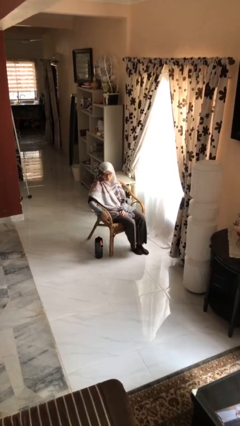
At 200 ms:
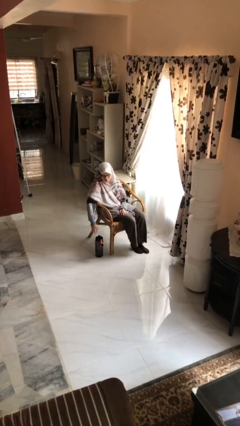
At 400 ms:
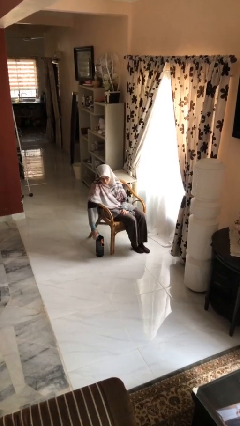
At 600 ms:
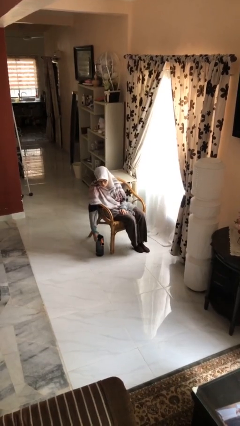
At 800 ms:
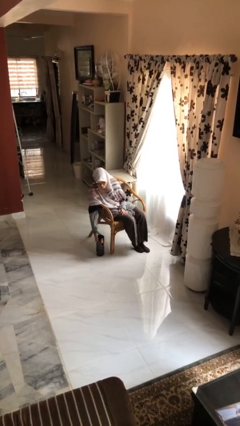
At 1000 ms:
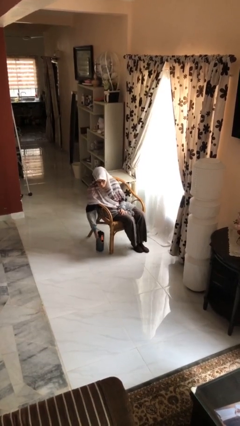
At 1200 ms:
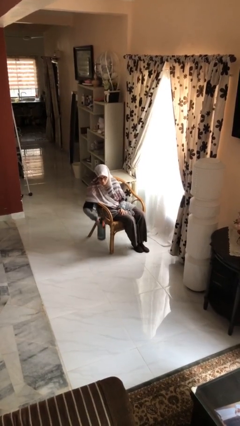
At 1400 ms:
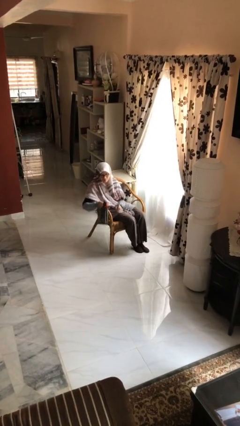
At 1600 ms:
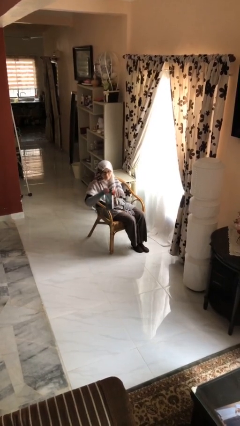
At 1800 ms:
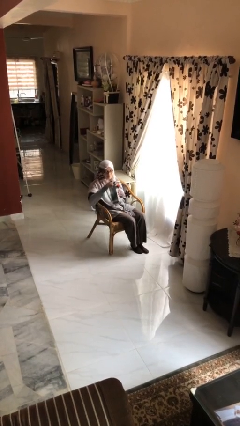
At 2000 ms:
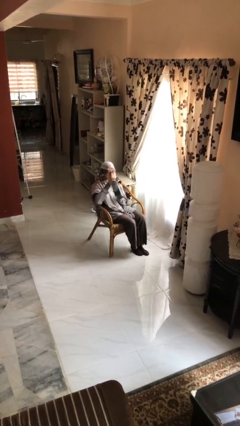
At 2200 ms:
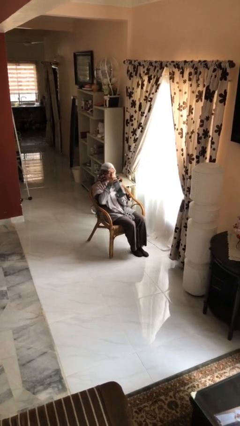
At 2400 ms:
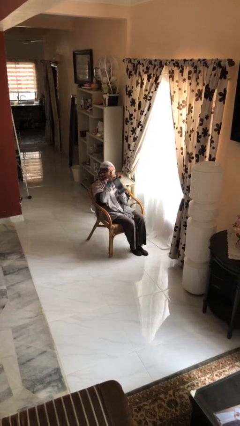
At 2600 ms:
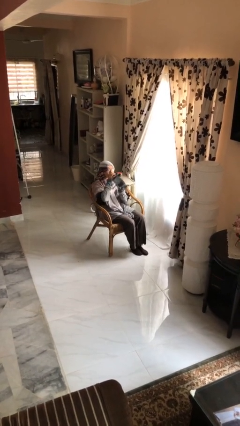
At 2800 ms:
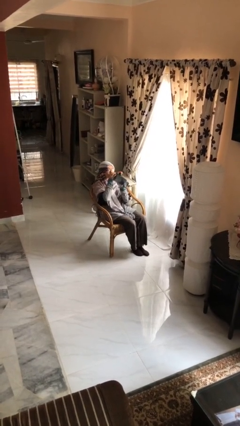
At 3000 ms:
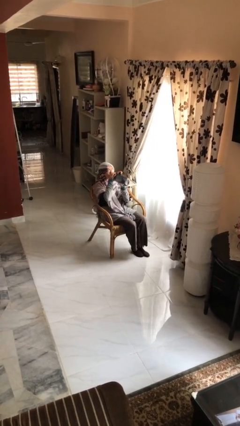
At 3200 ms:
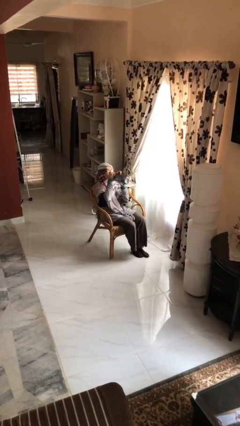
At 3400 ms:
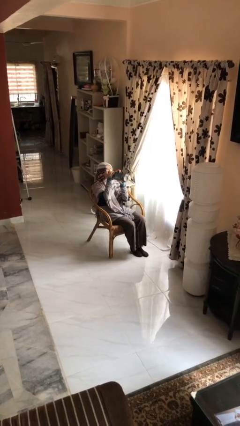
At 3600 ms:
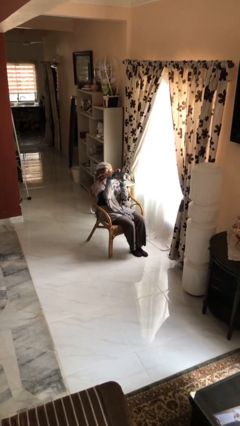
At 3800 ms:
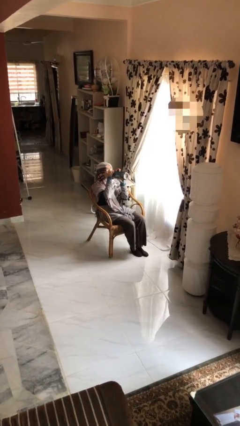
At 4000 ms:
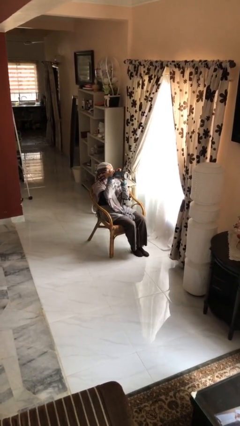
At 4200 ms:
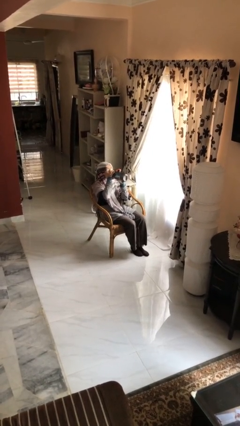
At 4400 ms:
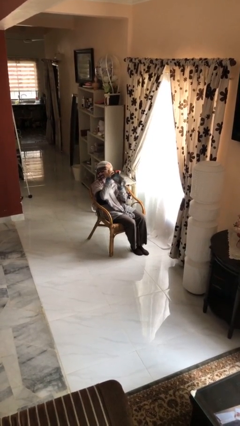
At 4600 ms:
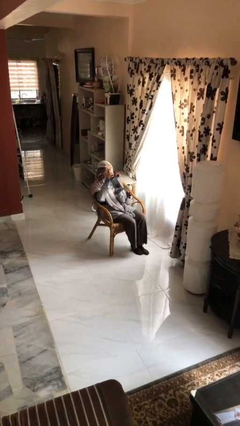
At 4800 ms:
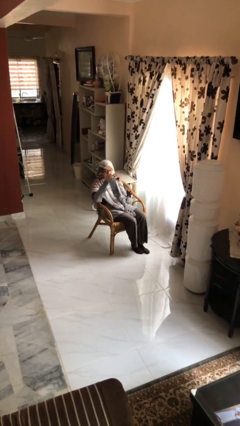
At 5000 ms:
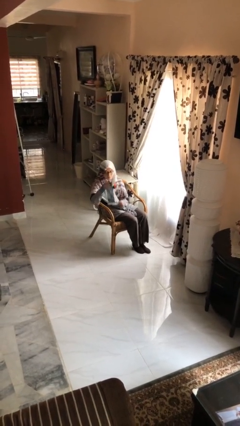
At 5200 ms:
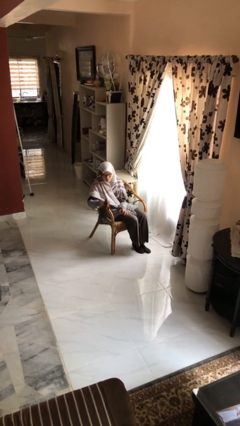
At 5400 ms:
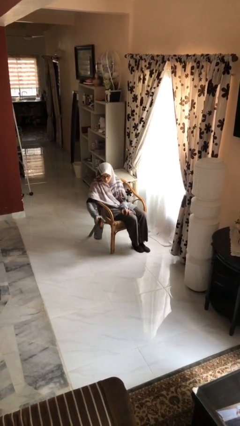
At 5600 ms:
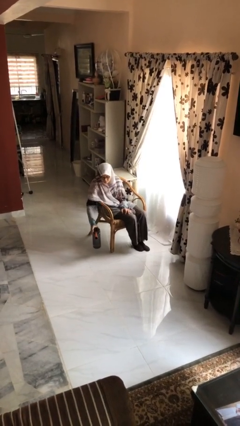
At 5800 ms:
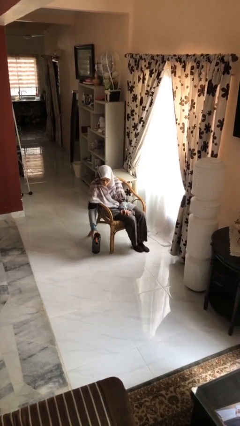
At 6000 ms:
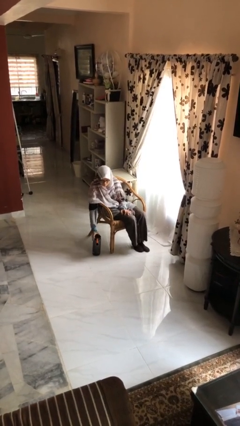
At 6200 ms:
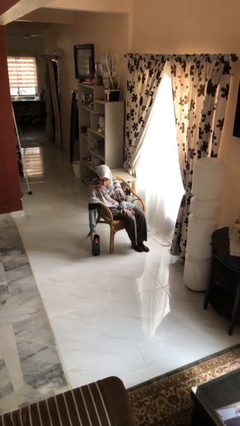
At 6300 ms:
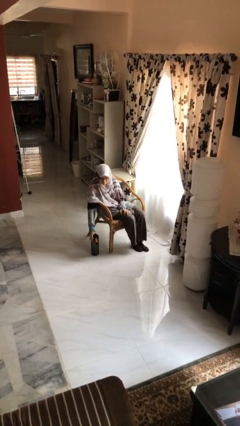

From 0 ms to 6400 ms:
person drinks from bottle

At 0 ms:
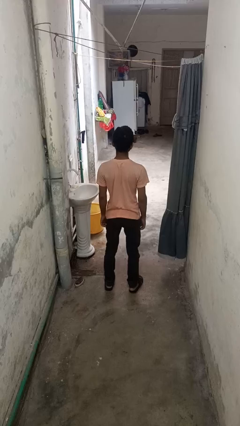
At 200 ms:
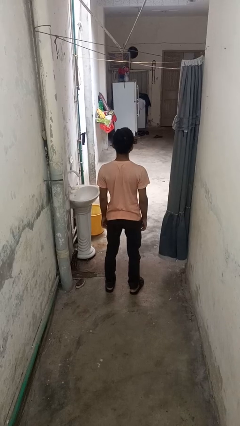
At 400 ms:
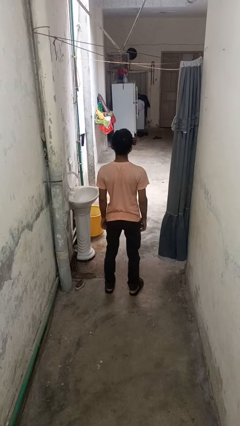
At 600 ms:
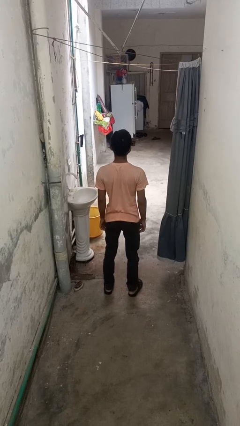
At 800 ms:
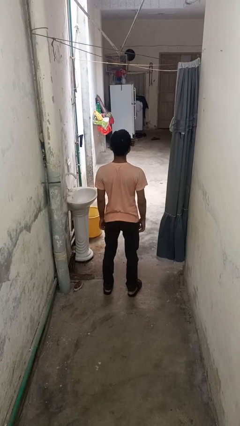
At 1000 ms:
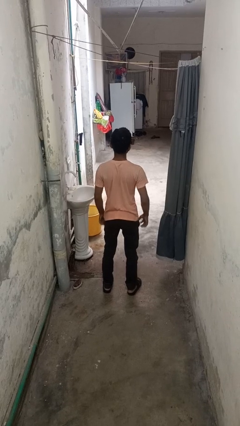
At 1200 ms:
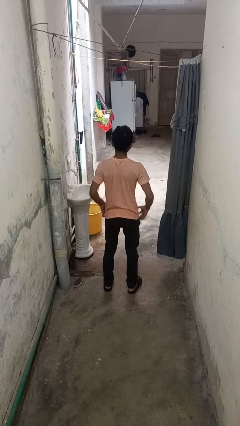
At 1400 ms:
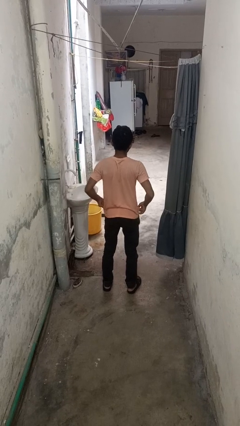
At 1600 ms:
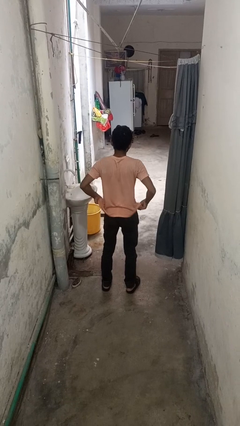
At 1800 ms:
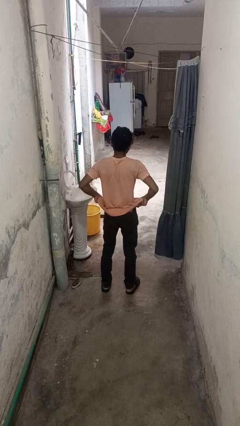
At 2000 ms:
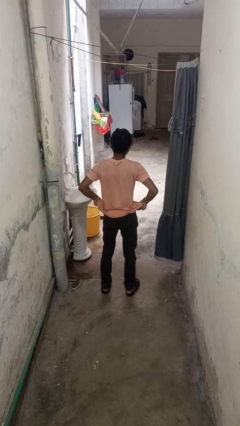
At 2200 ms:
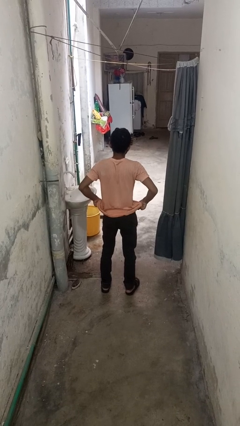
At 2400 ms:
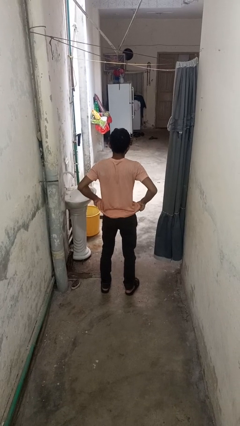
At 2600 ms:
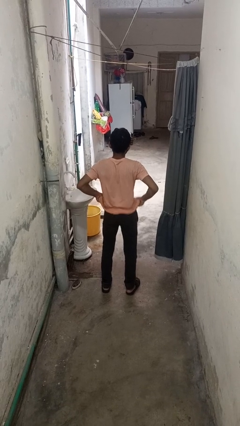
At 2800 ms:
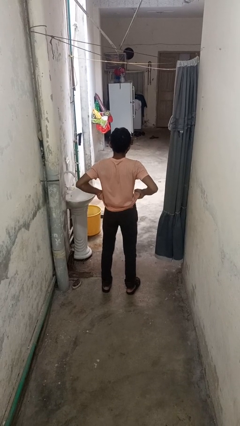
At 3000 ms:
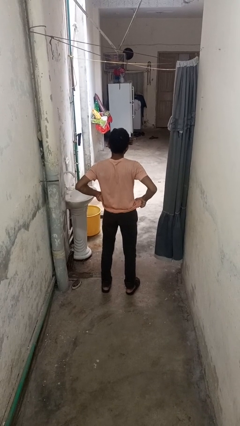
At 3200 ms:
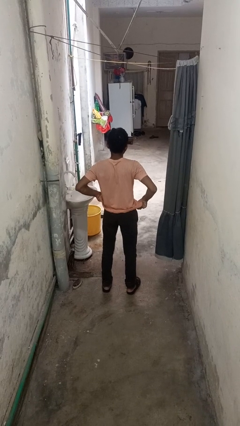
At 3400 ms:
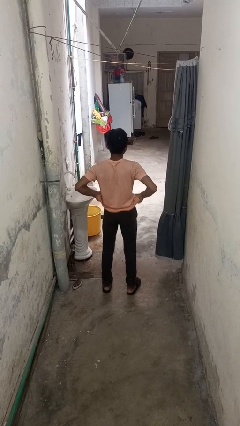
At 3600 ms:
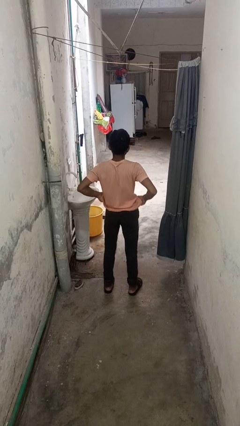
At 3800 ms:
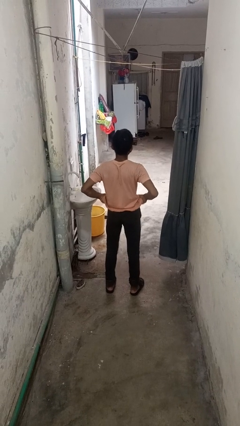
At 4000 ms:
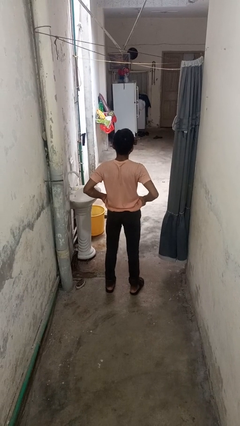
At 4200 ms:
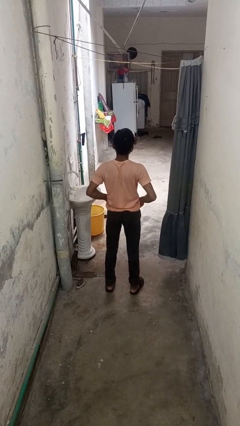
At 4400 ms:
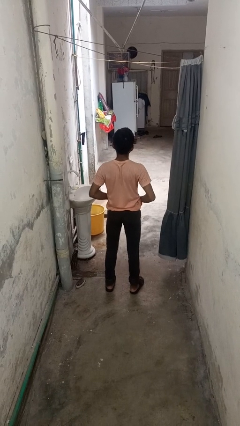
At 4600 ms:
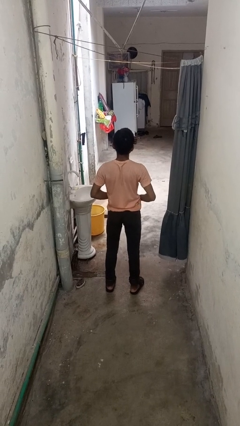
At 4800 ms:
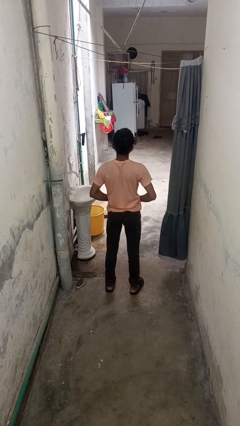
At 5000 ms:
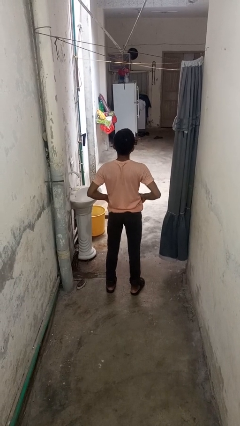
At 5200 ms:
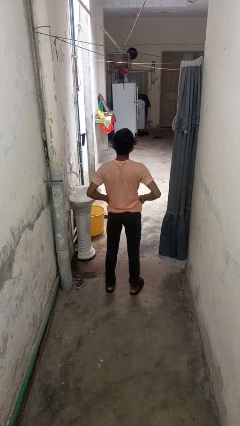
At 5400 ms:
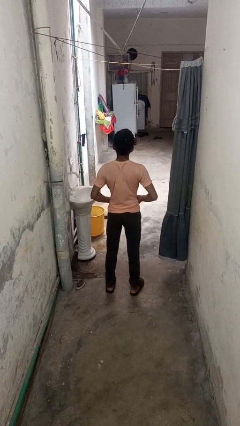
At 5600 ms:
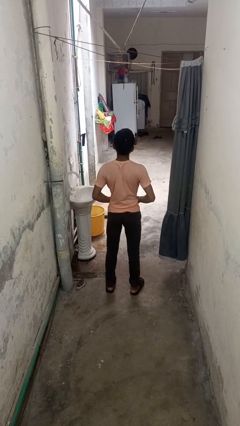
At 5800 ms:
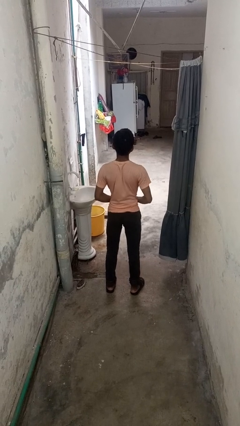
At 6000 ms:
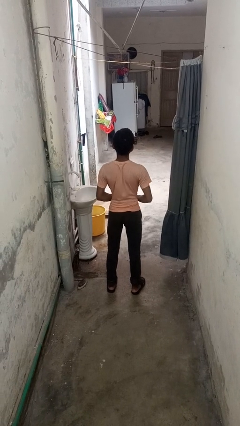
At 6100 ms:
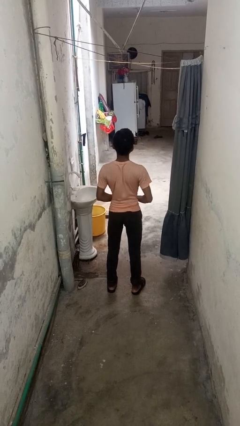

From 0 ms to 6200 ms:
person hikes up pants

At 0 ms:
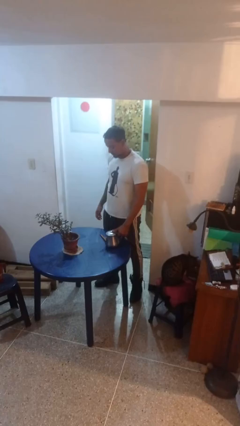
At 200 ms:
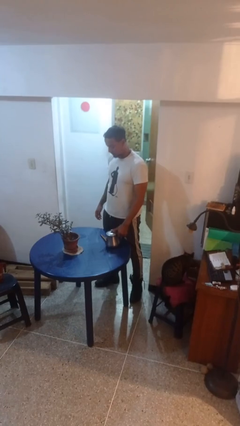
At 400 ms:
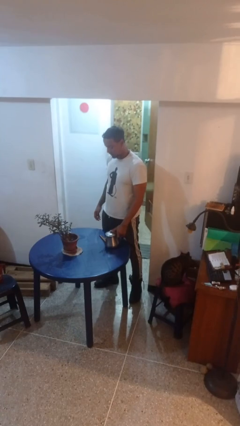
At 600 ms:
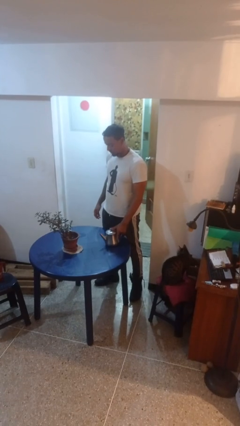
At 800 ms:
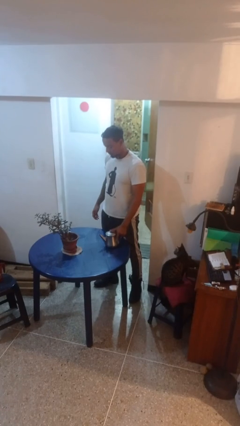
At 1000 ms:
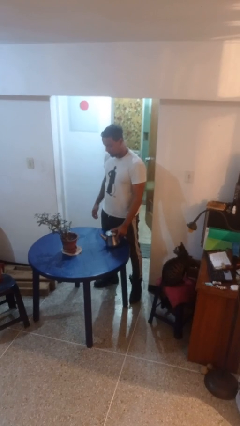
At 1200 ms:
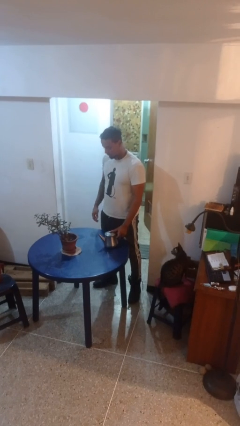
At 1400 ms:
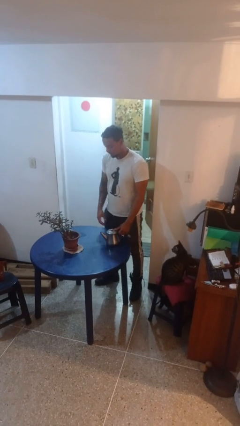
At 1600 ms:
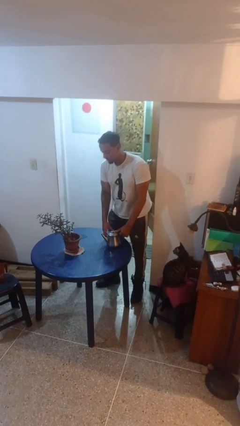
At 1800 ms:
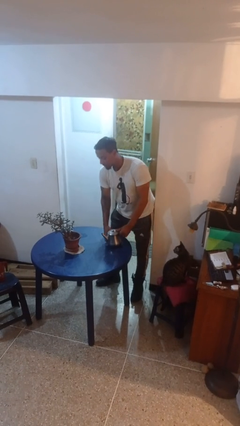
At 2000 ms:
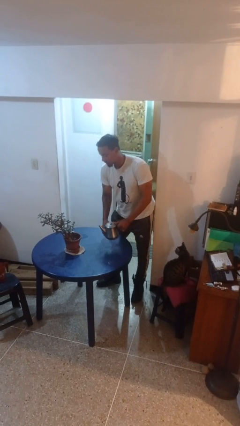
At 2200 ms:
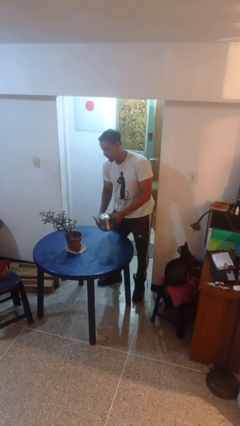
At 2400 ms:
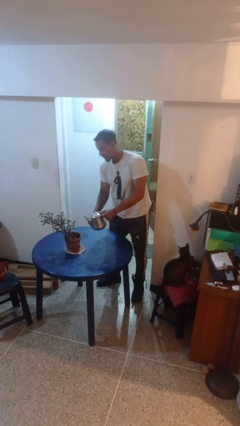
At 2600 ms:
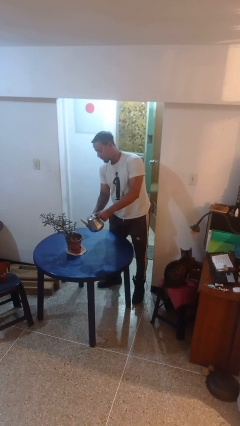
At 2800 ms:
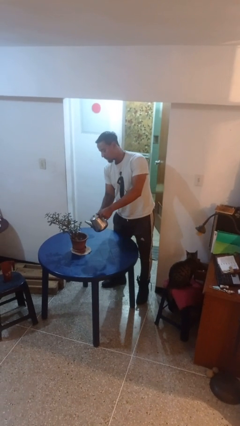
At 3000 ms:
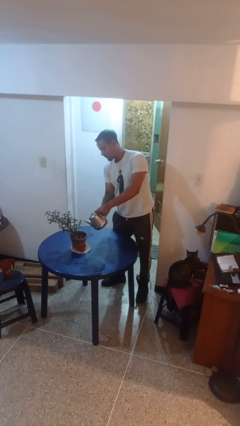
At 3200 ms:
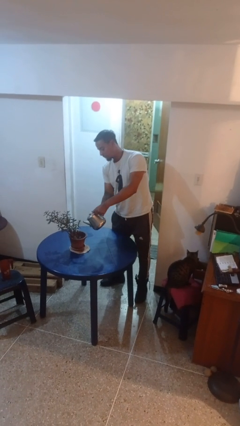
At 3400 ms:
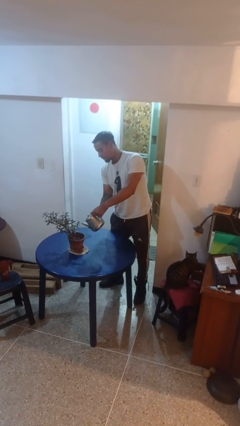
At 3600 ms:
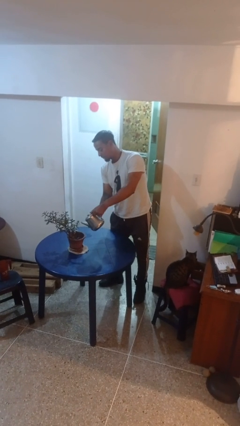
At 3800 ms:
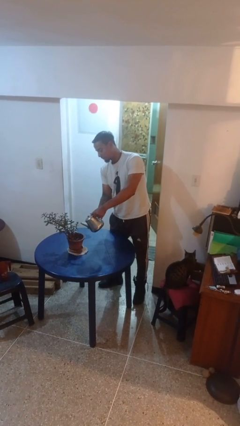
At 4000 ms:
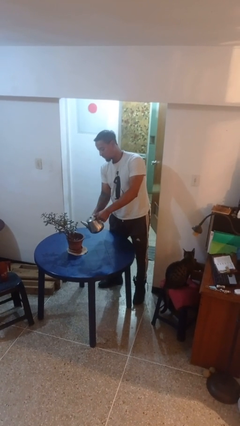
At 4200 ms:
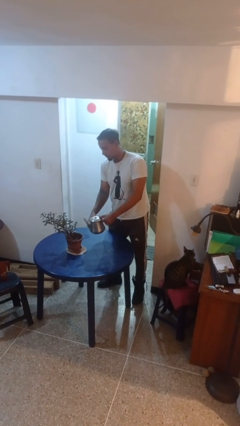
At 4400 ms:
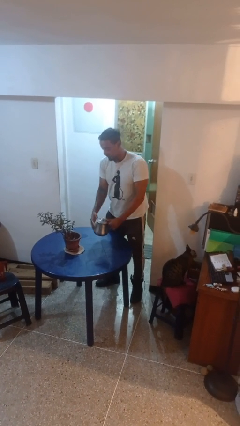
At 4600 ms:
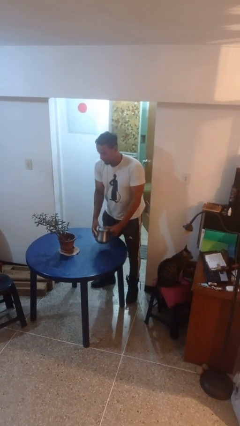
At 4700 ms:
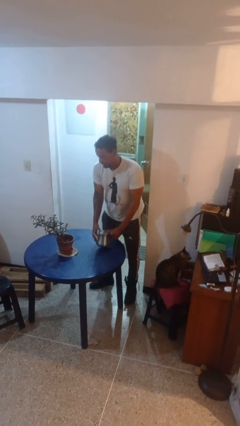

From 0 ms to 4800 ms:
person waters houseplant

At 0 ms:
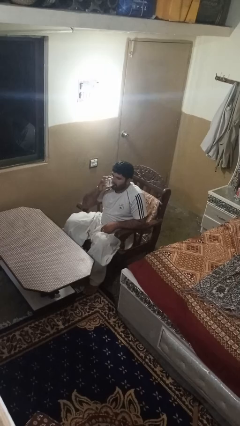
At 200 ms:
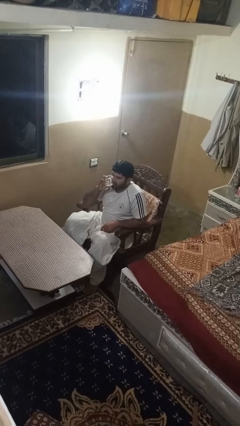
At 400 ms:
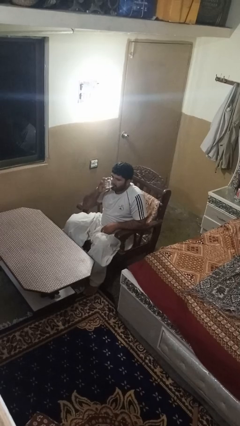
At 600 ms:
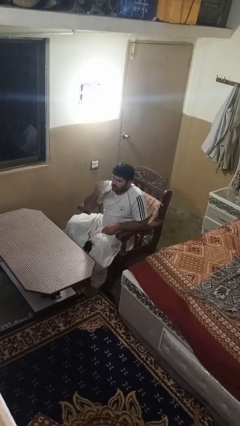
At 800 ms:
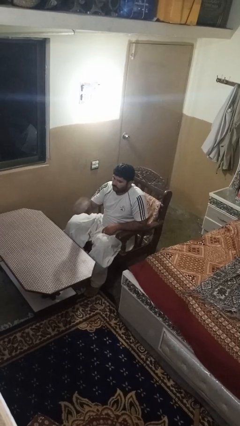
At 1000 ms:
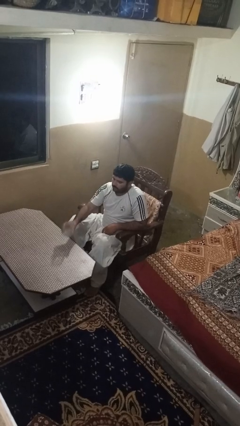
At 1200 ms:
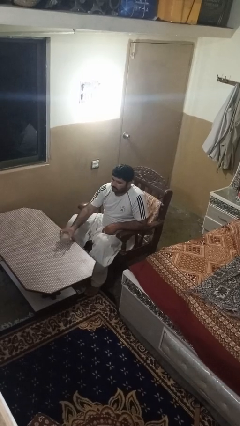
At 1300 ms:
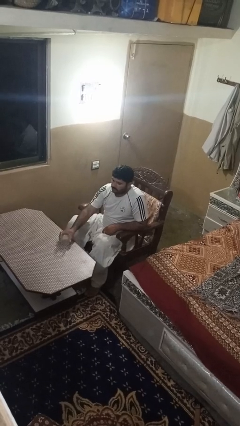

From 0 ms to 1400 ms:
person puts down object on table
